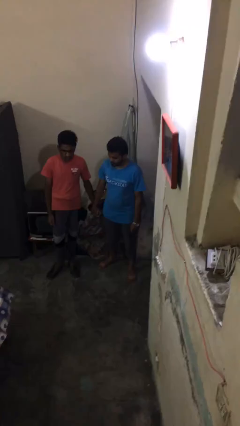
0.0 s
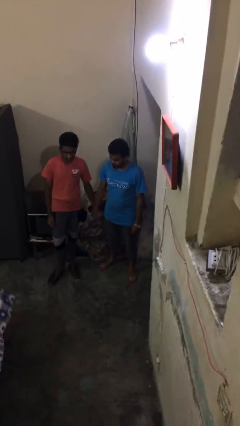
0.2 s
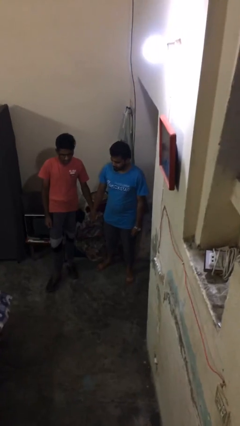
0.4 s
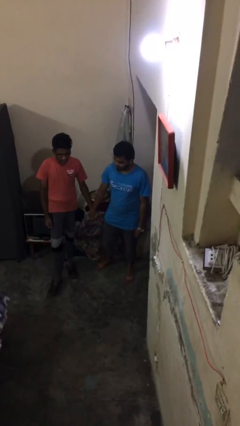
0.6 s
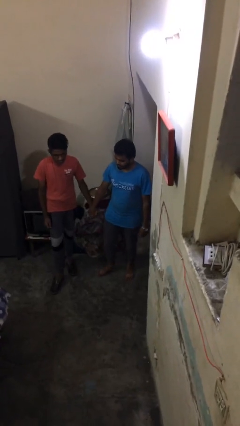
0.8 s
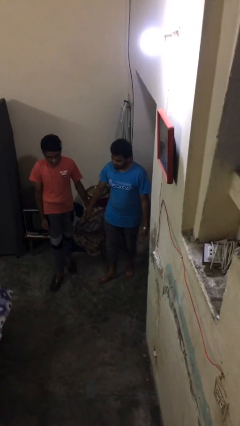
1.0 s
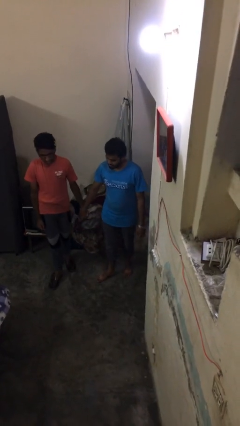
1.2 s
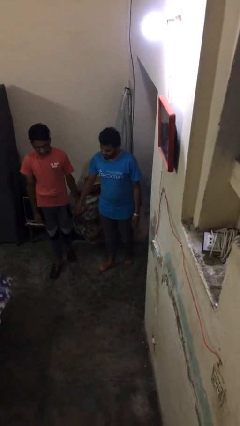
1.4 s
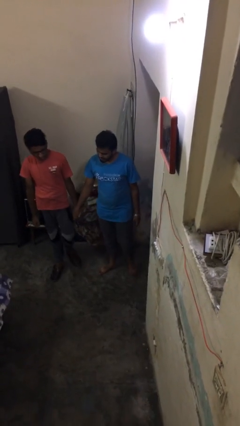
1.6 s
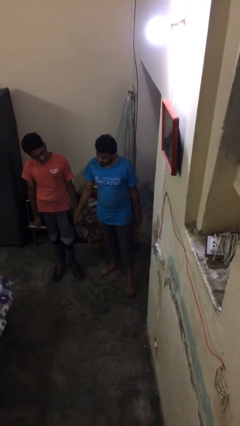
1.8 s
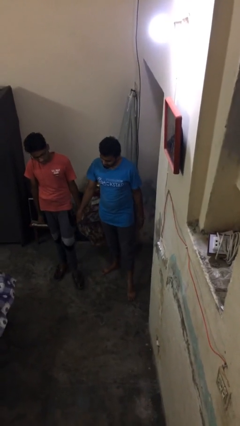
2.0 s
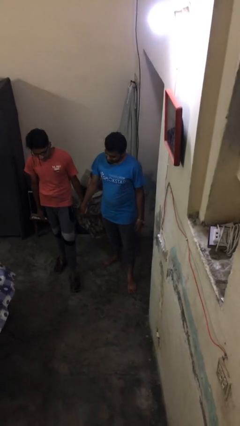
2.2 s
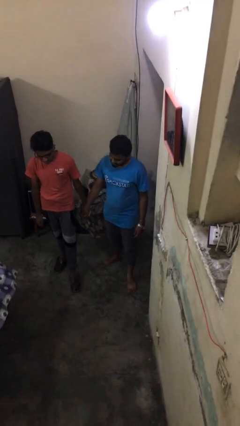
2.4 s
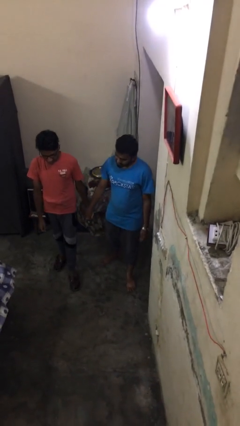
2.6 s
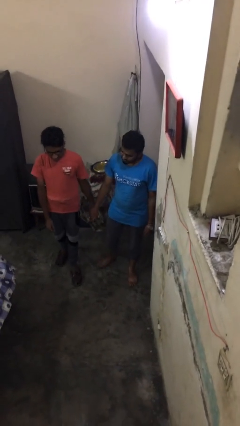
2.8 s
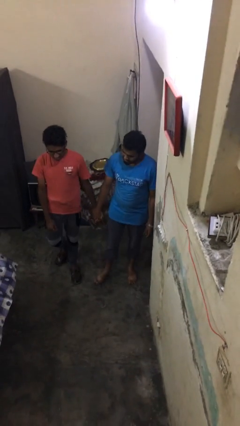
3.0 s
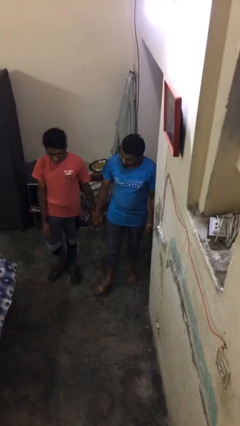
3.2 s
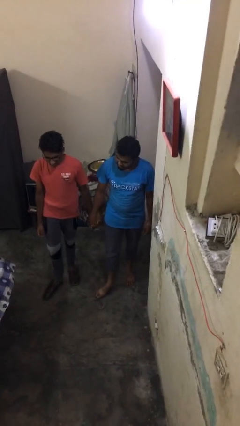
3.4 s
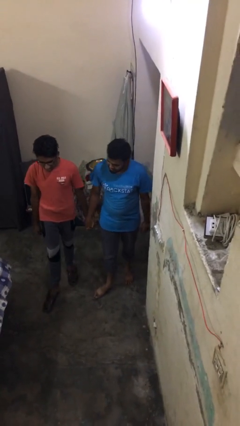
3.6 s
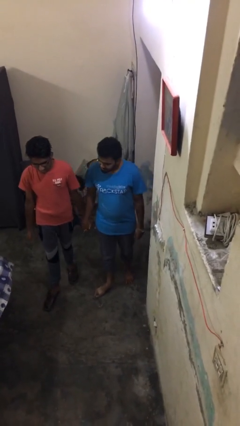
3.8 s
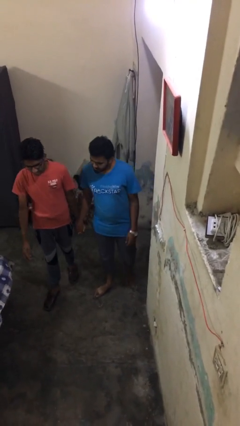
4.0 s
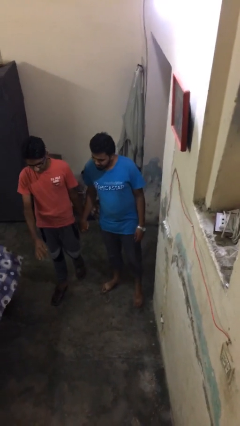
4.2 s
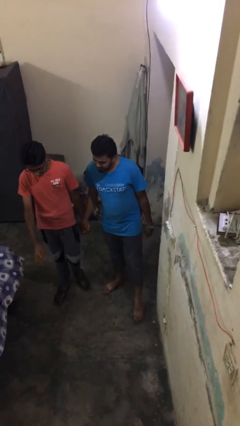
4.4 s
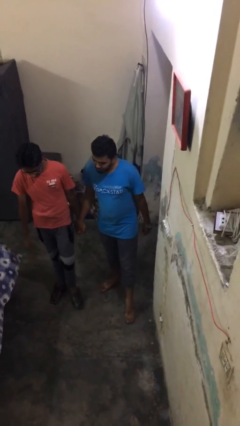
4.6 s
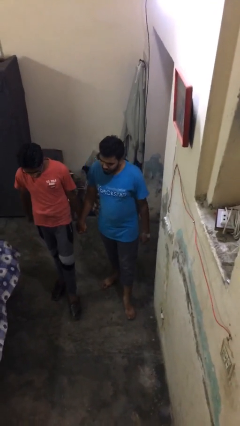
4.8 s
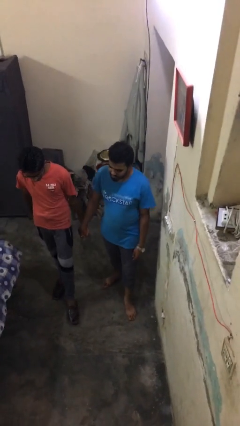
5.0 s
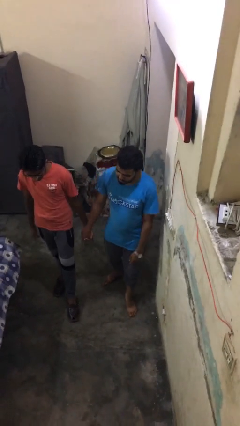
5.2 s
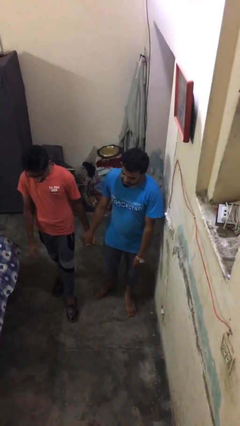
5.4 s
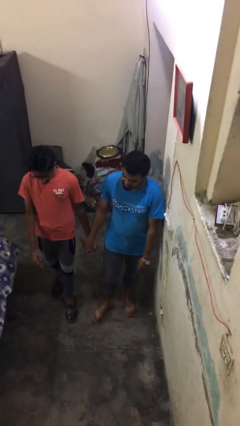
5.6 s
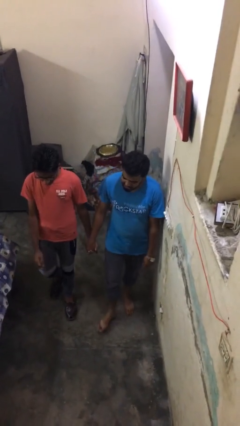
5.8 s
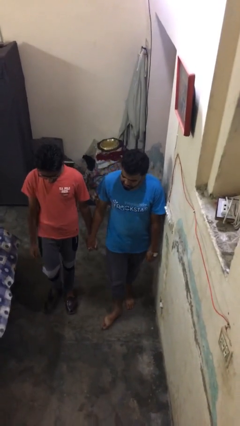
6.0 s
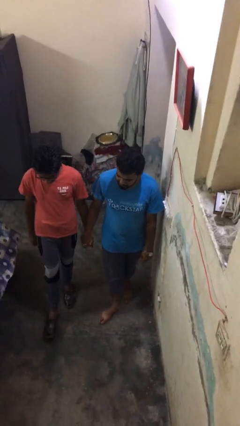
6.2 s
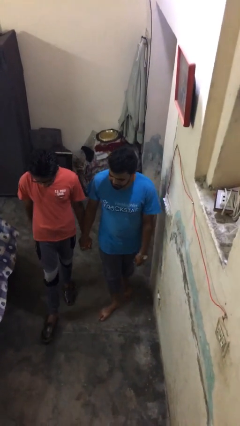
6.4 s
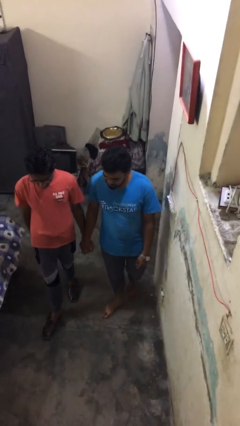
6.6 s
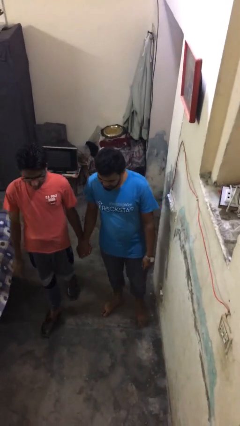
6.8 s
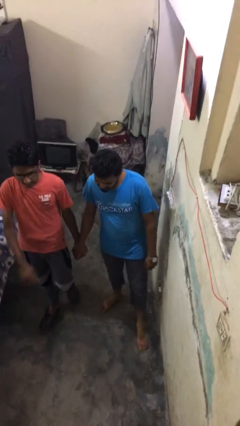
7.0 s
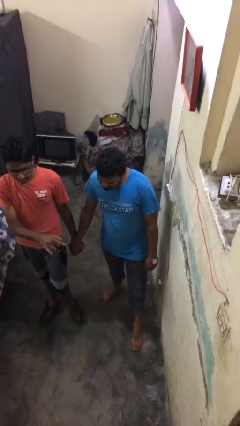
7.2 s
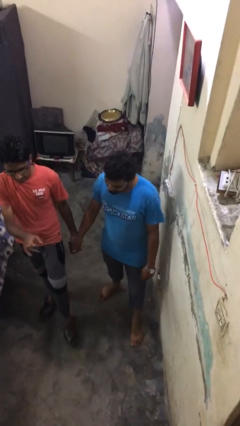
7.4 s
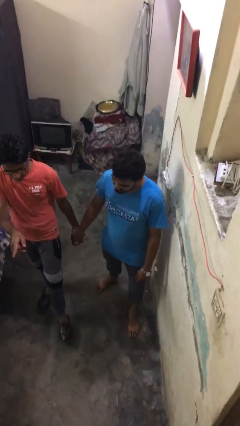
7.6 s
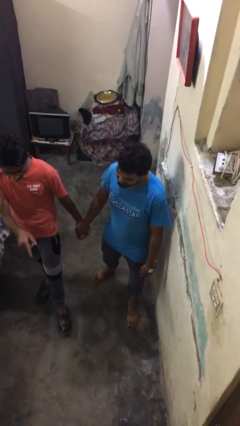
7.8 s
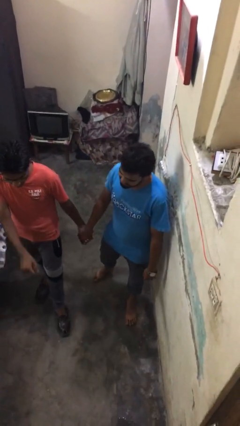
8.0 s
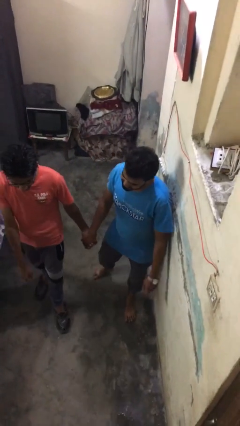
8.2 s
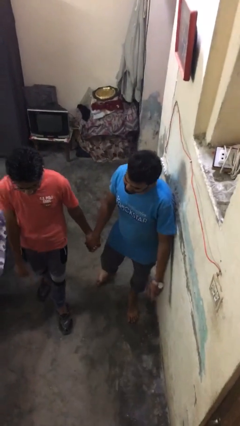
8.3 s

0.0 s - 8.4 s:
person holds hand

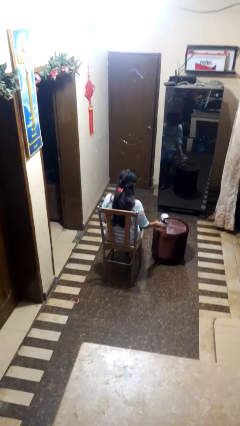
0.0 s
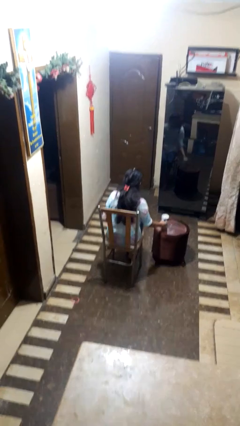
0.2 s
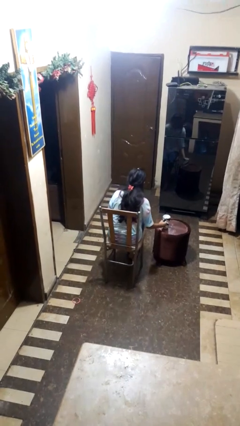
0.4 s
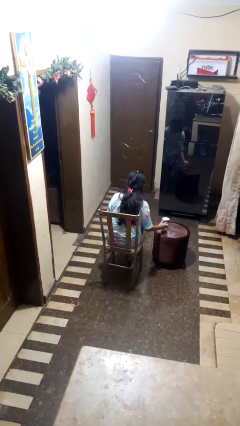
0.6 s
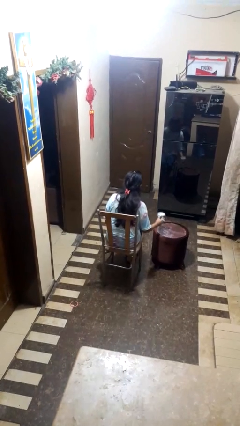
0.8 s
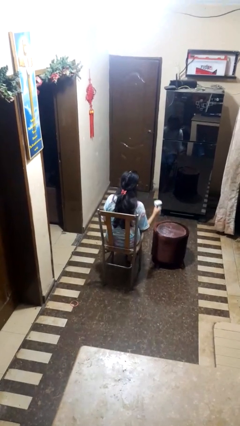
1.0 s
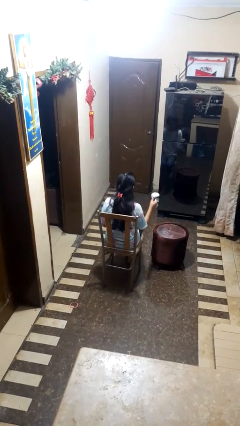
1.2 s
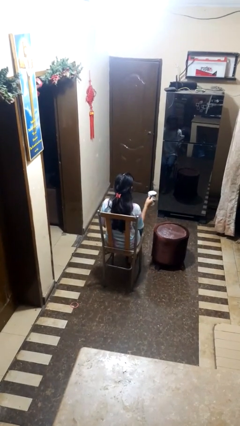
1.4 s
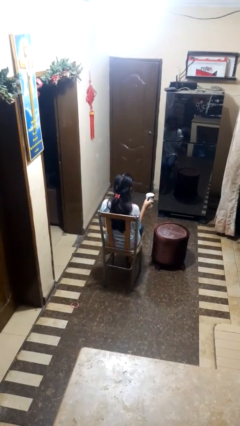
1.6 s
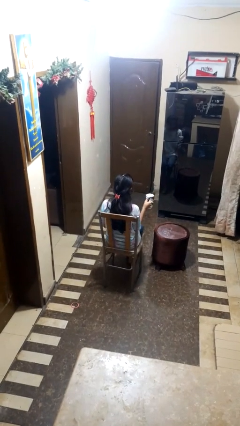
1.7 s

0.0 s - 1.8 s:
person picks up object from table

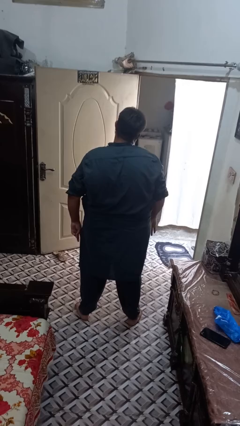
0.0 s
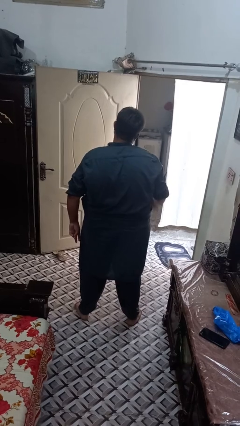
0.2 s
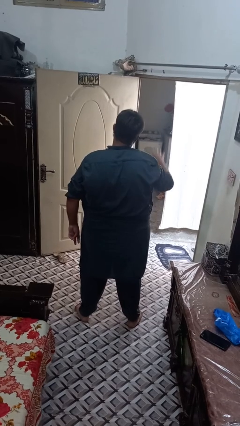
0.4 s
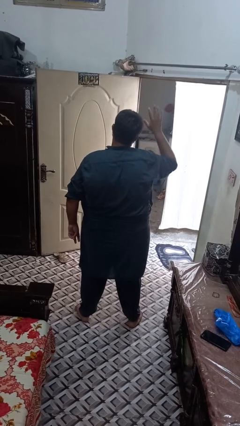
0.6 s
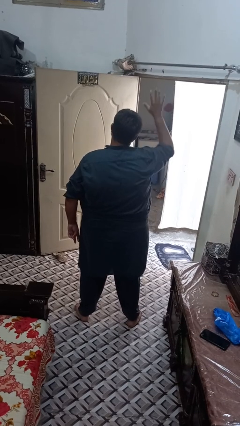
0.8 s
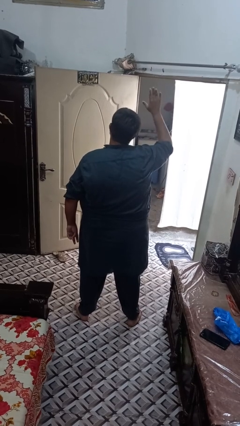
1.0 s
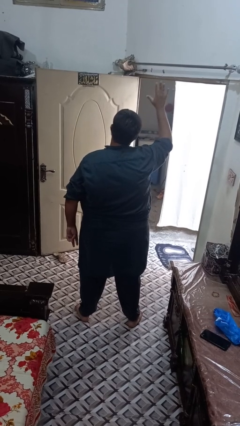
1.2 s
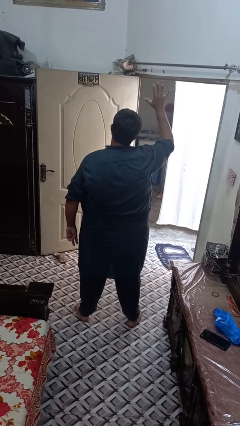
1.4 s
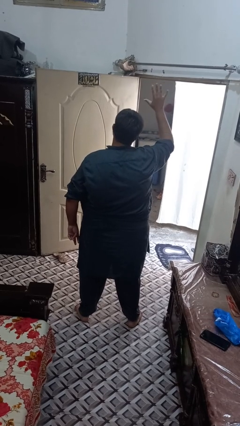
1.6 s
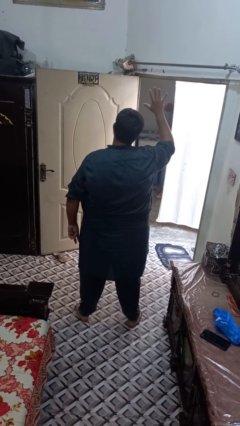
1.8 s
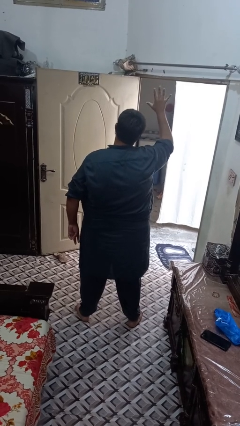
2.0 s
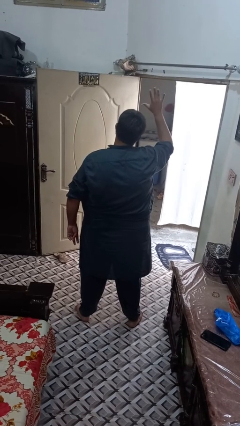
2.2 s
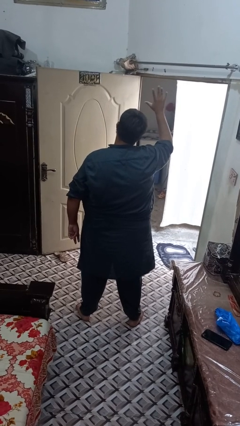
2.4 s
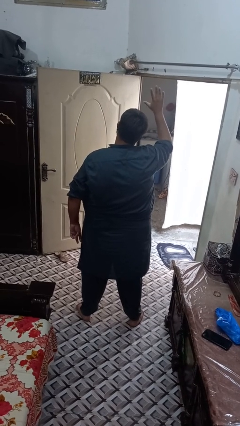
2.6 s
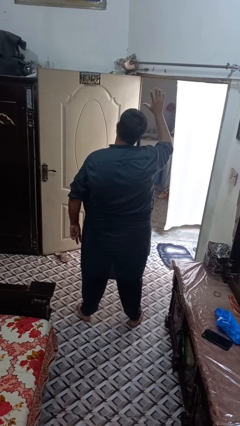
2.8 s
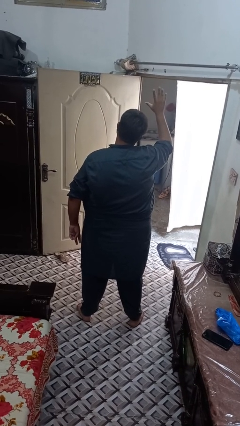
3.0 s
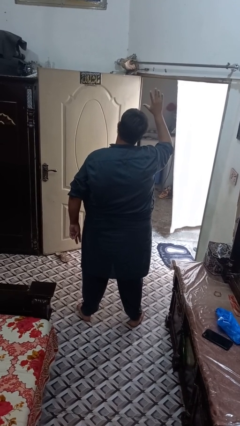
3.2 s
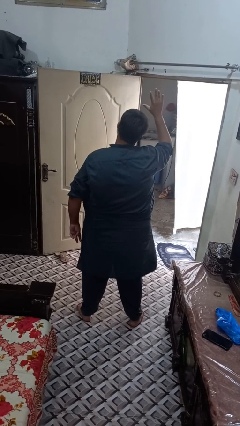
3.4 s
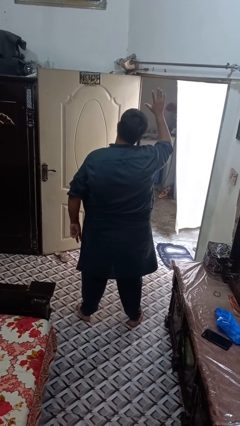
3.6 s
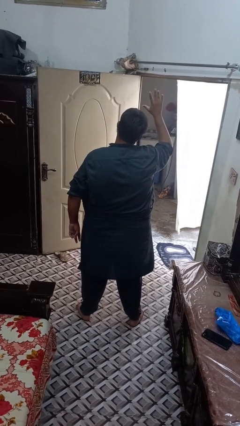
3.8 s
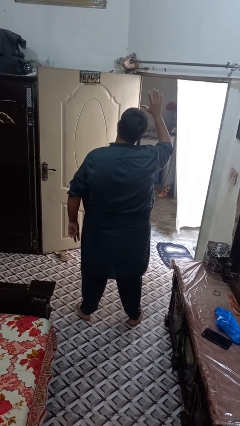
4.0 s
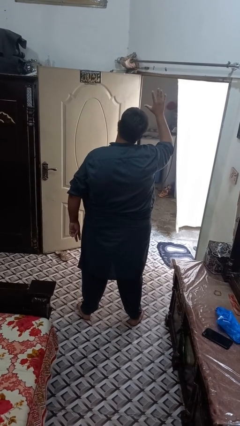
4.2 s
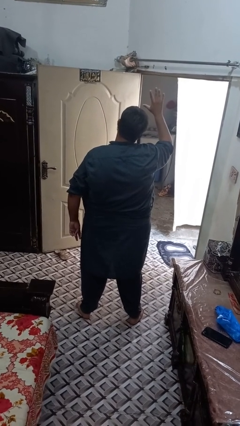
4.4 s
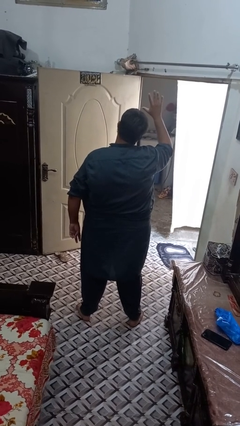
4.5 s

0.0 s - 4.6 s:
person gestures number five

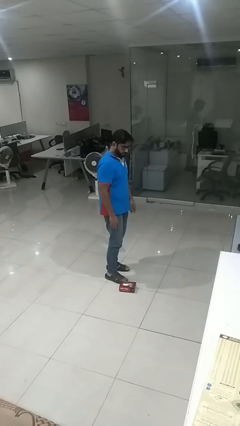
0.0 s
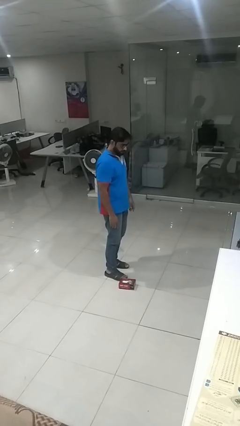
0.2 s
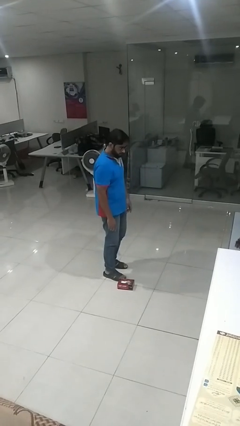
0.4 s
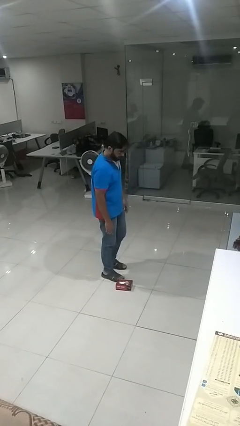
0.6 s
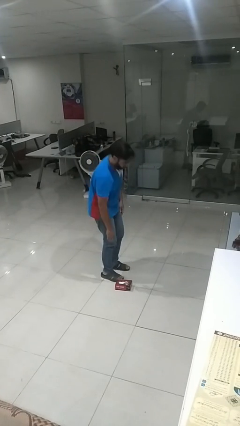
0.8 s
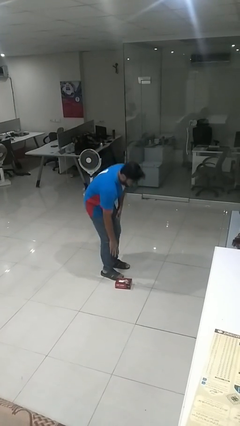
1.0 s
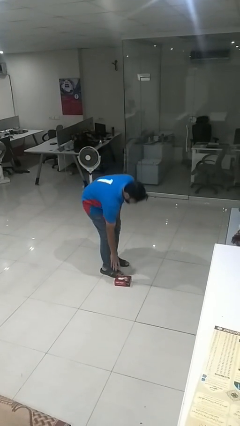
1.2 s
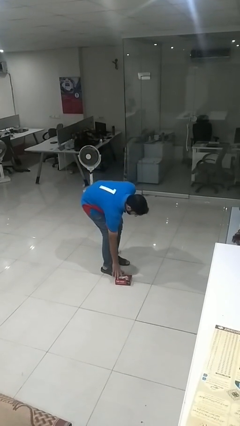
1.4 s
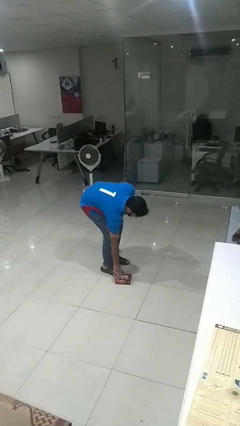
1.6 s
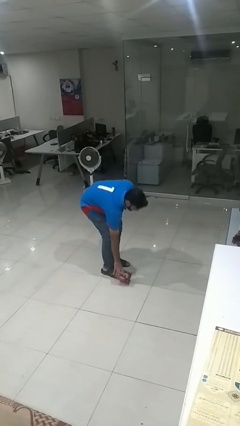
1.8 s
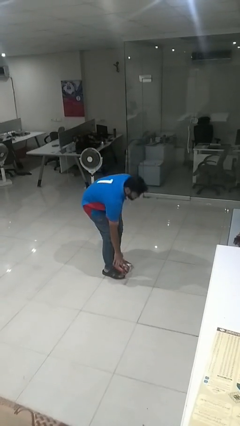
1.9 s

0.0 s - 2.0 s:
person picks up object from floor

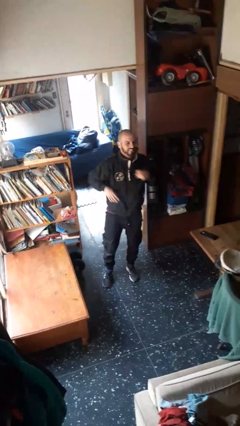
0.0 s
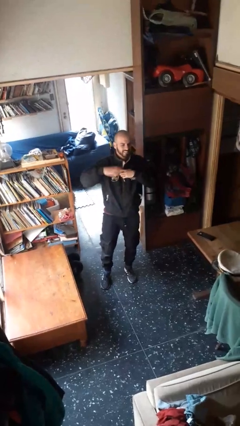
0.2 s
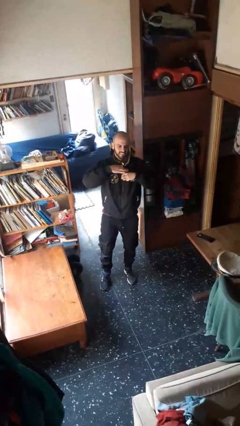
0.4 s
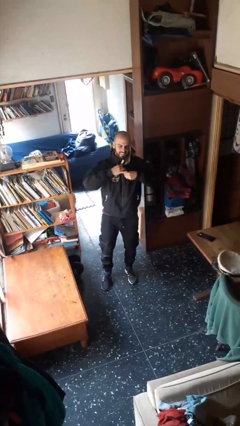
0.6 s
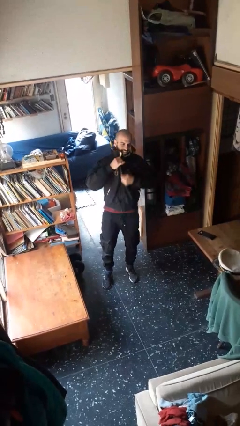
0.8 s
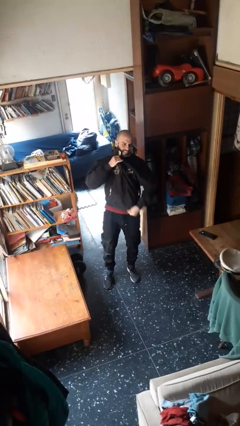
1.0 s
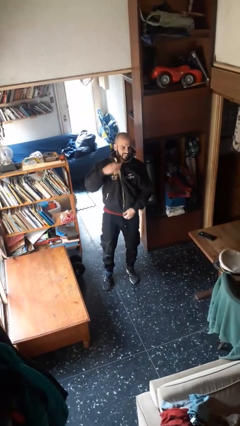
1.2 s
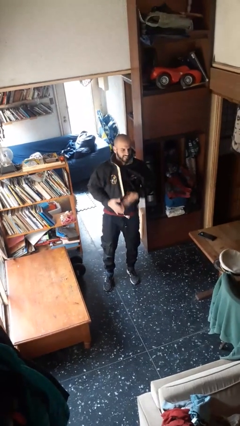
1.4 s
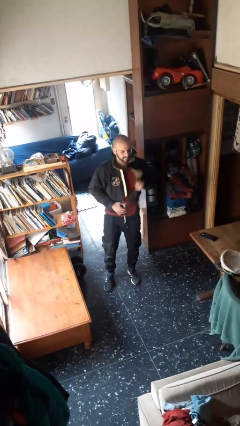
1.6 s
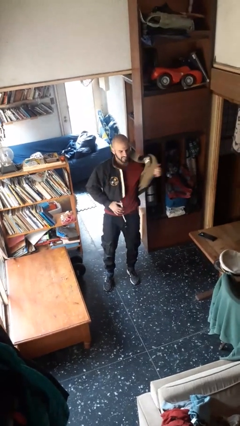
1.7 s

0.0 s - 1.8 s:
person unzips jacket
